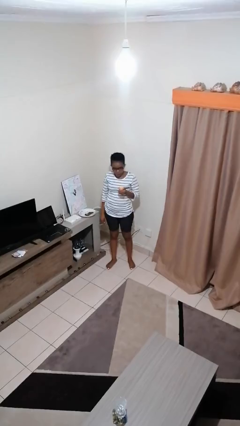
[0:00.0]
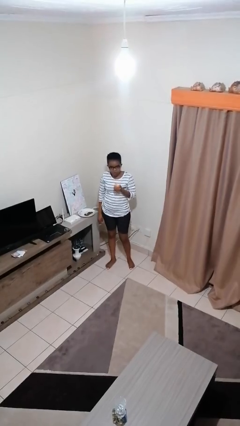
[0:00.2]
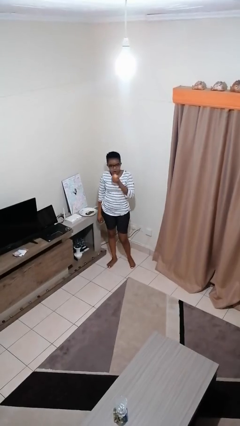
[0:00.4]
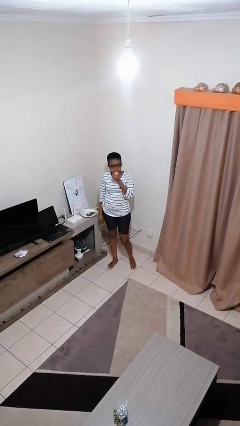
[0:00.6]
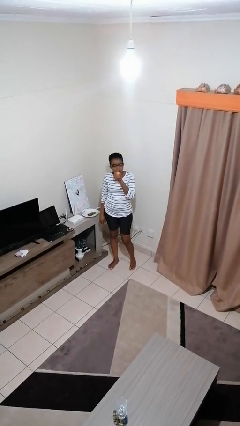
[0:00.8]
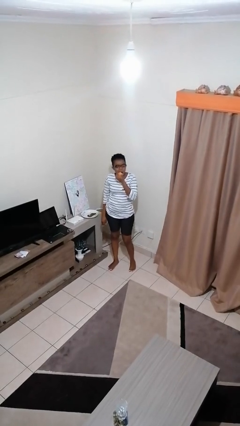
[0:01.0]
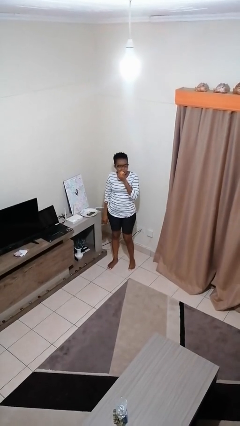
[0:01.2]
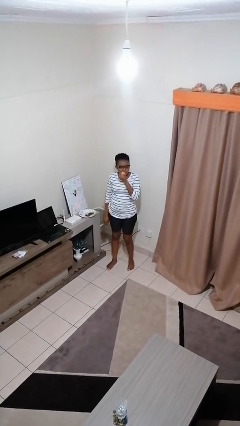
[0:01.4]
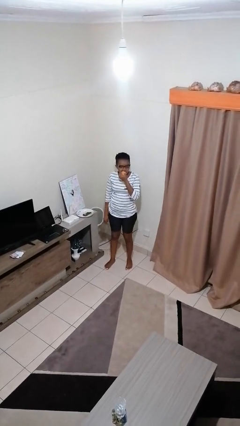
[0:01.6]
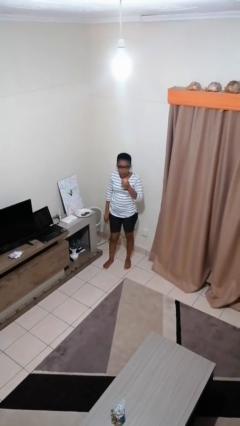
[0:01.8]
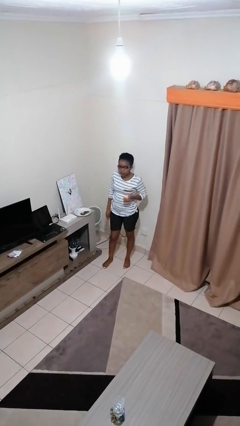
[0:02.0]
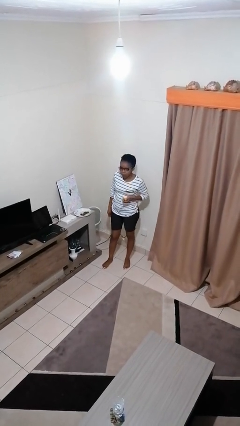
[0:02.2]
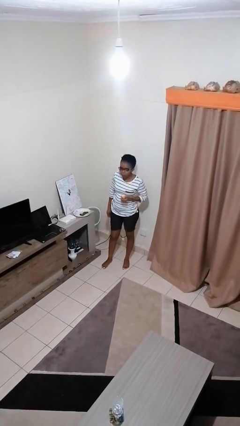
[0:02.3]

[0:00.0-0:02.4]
person eats apple

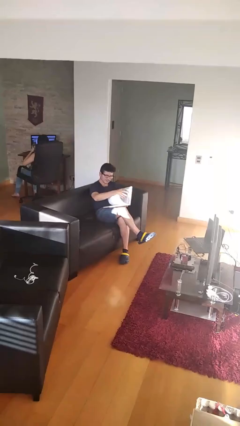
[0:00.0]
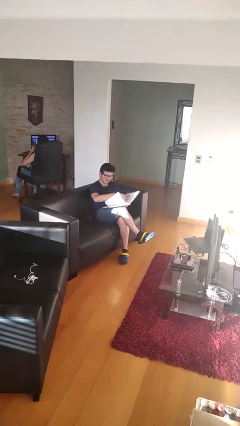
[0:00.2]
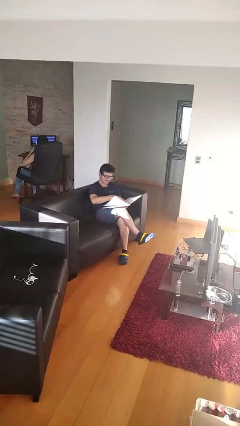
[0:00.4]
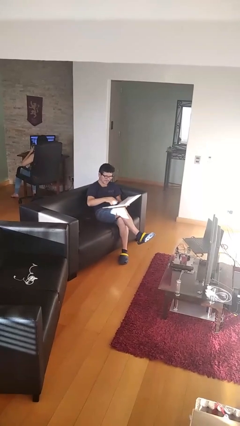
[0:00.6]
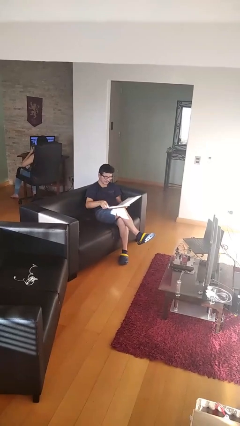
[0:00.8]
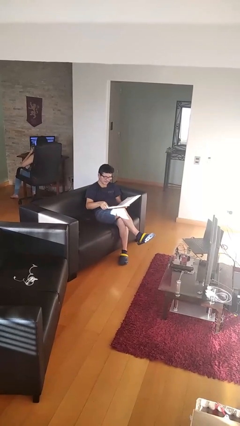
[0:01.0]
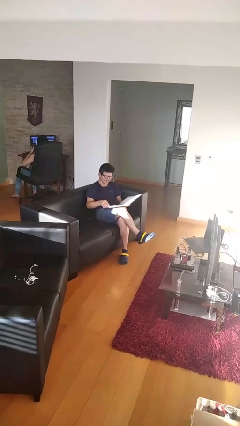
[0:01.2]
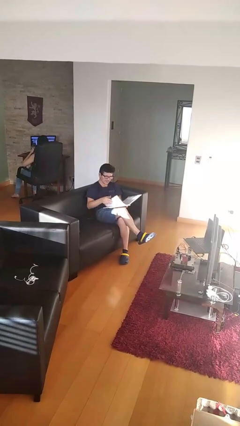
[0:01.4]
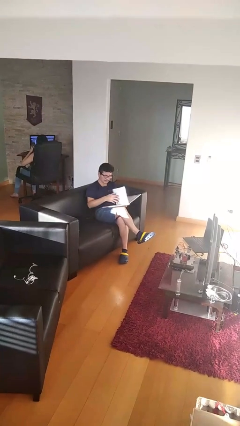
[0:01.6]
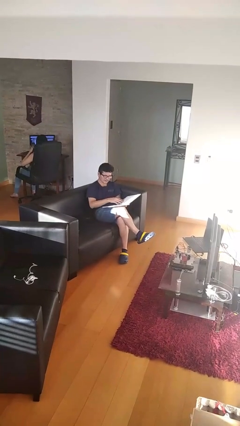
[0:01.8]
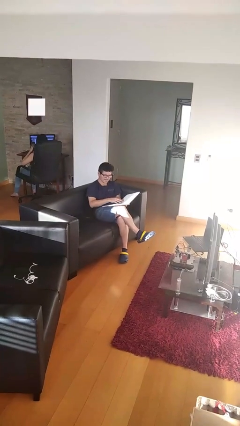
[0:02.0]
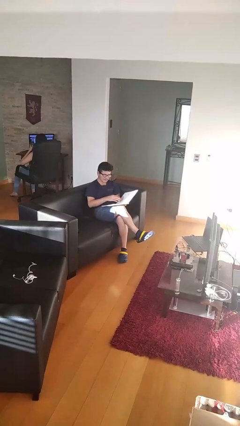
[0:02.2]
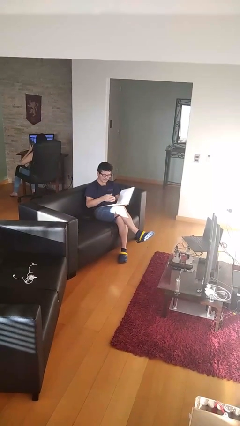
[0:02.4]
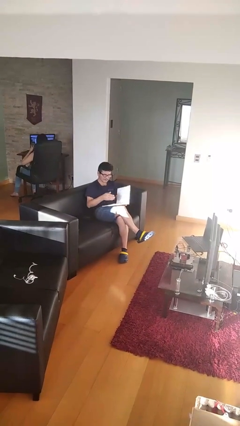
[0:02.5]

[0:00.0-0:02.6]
person reads document

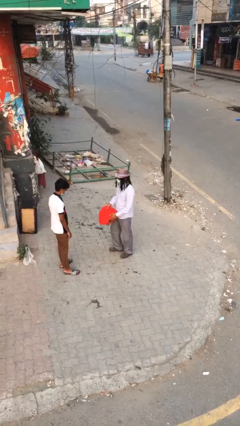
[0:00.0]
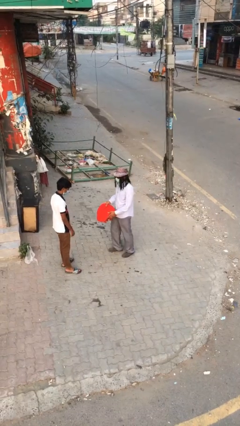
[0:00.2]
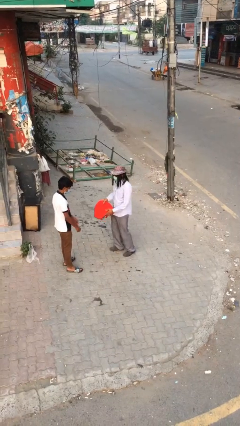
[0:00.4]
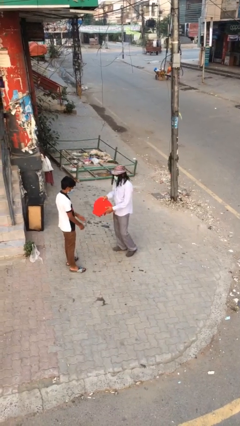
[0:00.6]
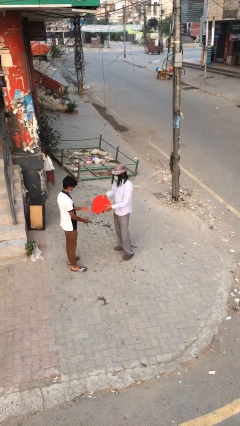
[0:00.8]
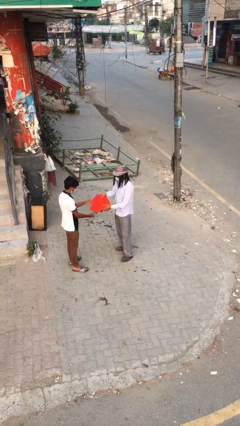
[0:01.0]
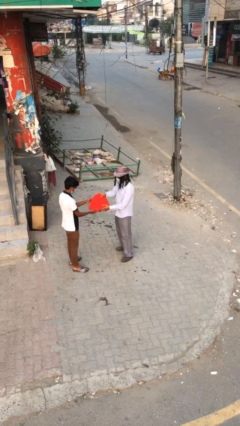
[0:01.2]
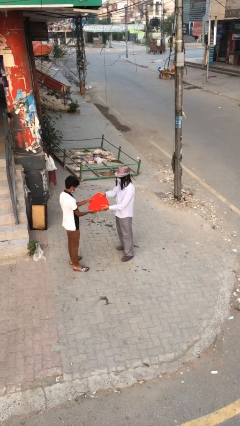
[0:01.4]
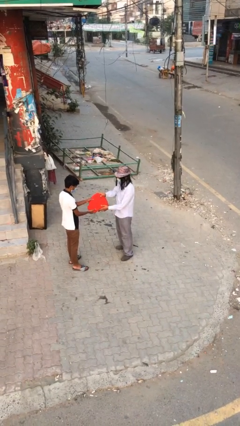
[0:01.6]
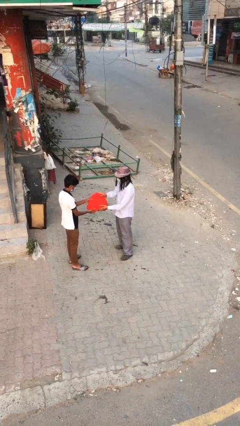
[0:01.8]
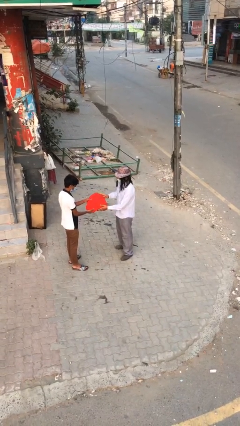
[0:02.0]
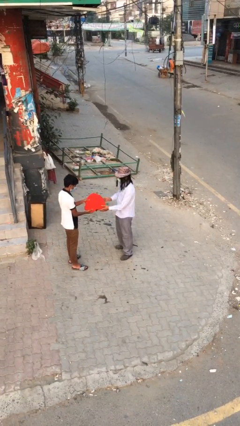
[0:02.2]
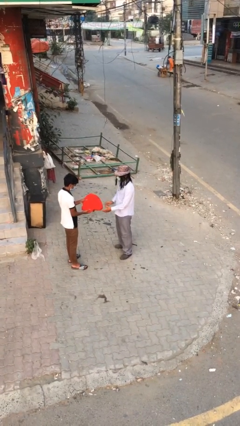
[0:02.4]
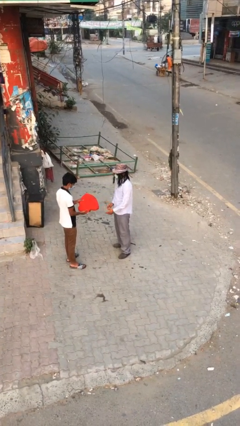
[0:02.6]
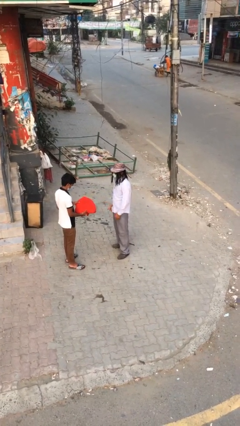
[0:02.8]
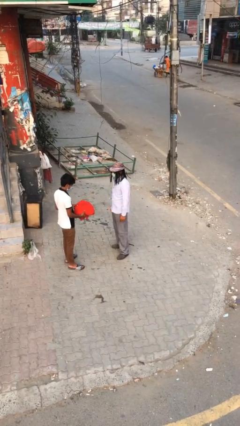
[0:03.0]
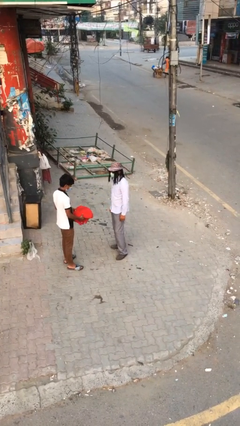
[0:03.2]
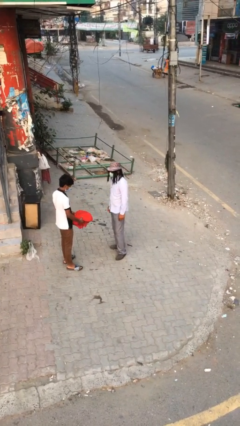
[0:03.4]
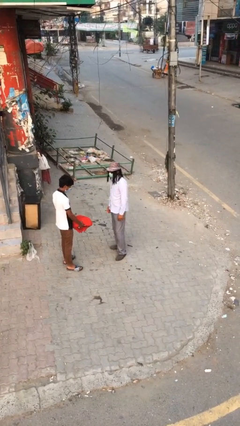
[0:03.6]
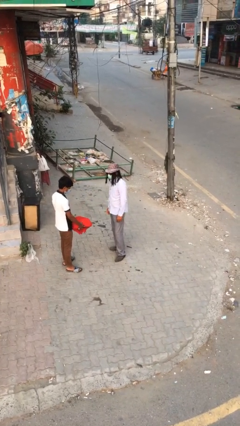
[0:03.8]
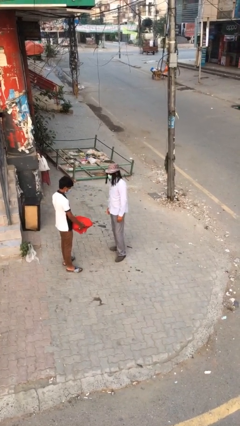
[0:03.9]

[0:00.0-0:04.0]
person transfers object to person

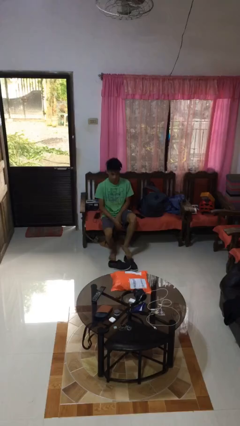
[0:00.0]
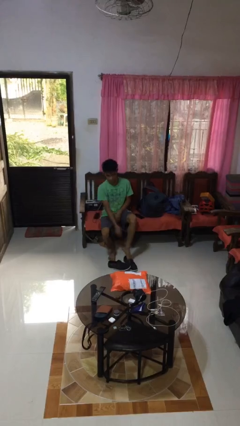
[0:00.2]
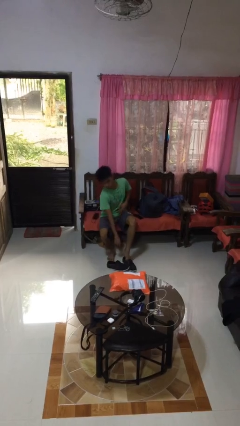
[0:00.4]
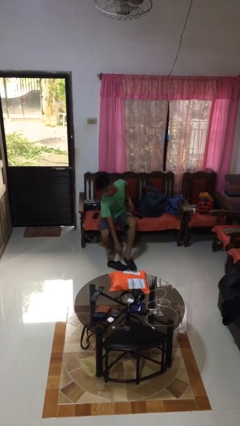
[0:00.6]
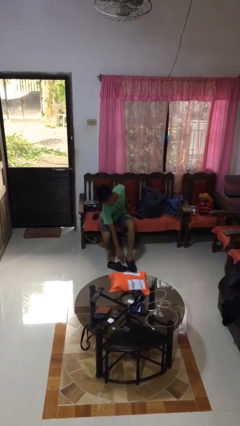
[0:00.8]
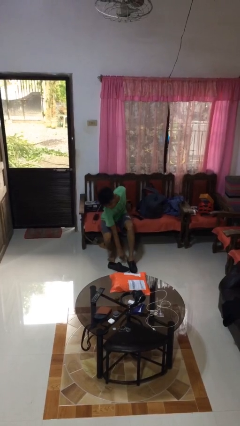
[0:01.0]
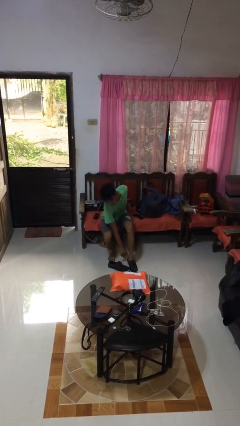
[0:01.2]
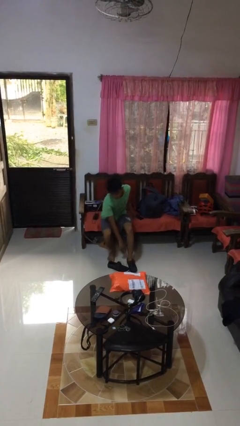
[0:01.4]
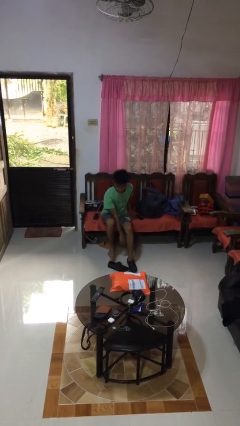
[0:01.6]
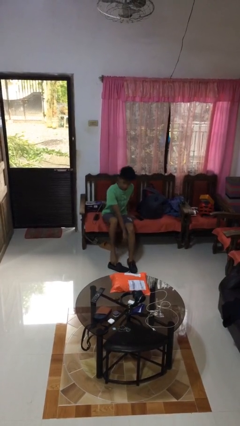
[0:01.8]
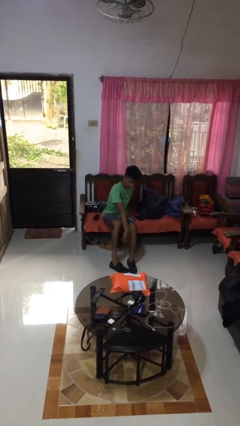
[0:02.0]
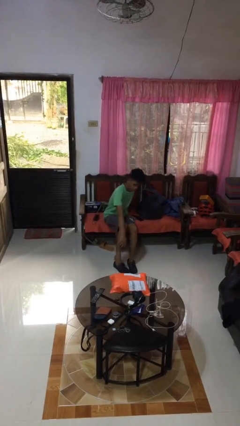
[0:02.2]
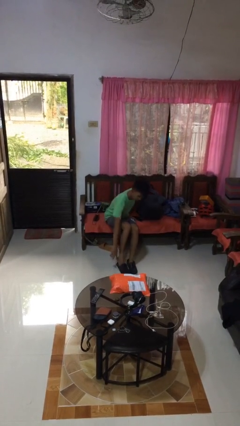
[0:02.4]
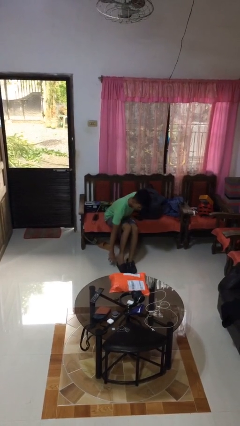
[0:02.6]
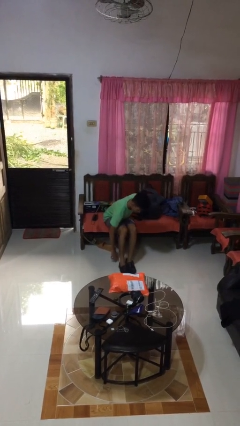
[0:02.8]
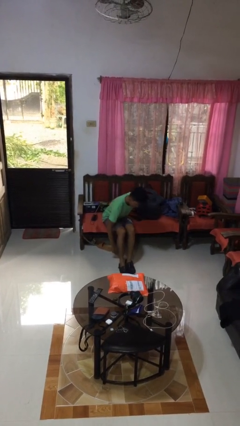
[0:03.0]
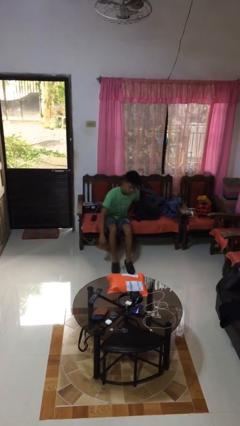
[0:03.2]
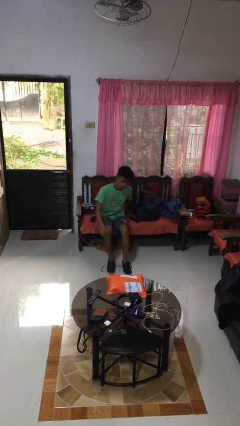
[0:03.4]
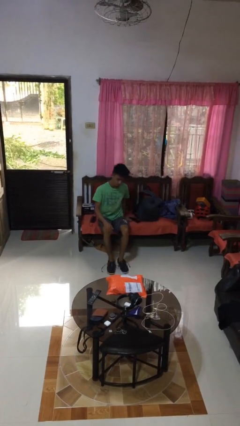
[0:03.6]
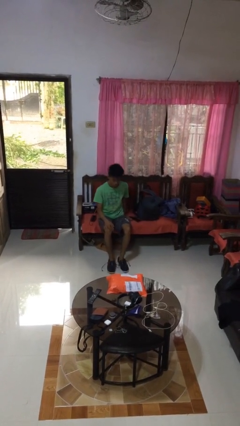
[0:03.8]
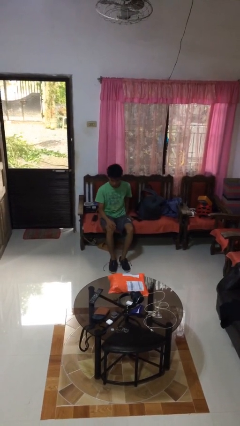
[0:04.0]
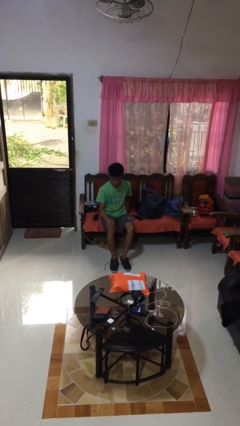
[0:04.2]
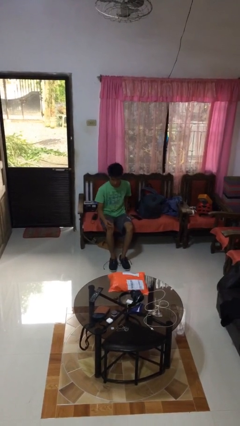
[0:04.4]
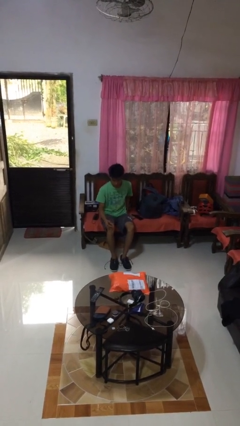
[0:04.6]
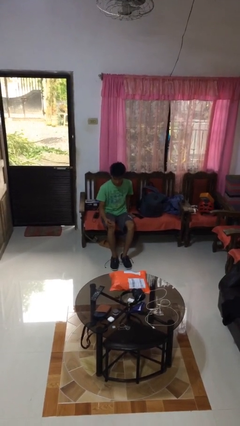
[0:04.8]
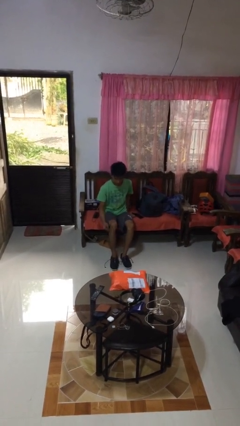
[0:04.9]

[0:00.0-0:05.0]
person puts on shoes

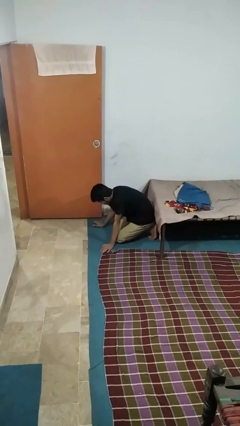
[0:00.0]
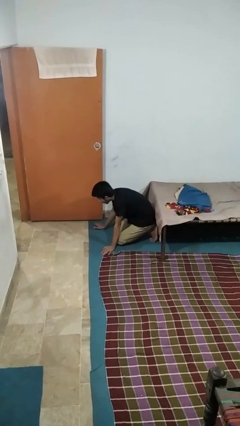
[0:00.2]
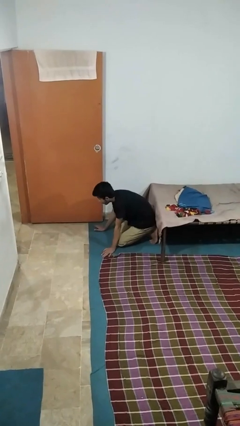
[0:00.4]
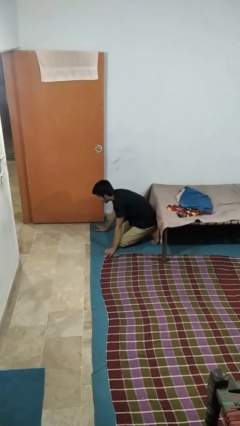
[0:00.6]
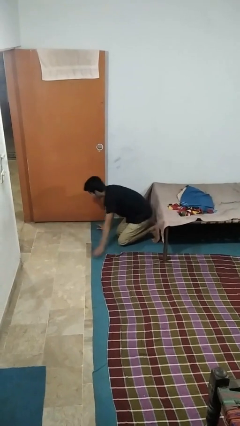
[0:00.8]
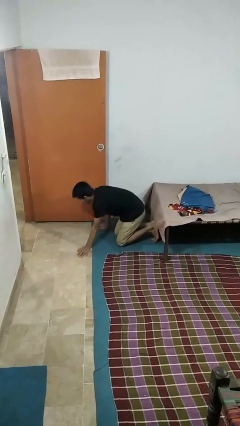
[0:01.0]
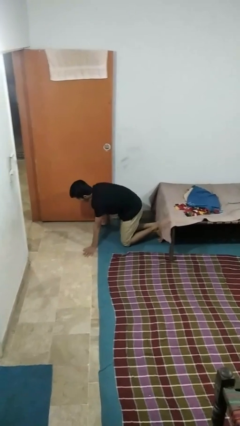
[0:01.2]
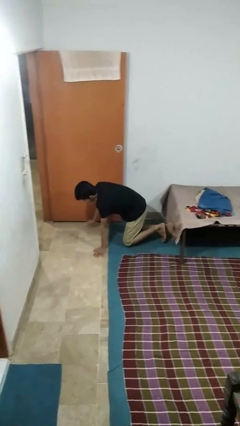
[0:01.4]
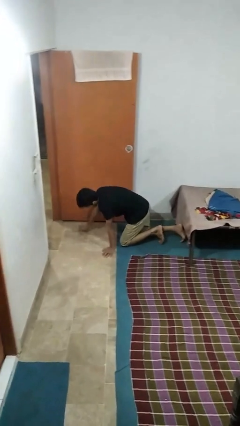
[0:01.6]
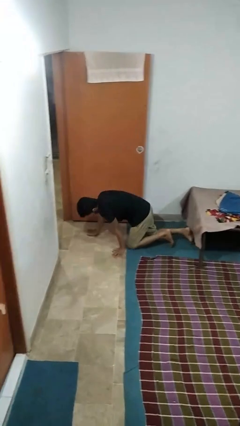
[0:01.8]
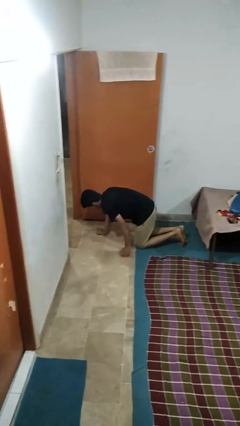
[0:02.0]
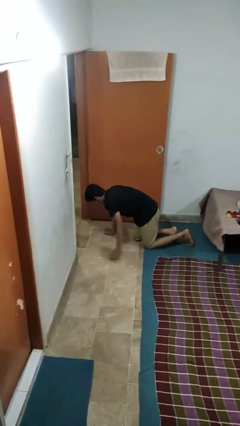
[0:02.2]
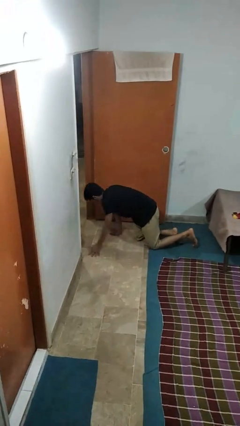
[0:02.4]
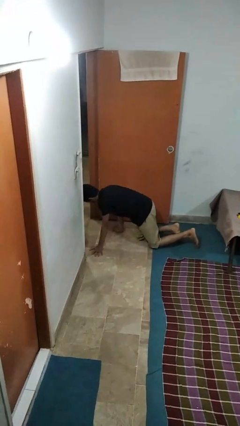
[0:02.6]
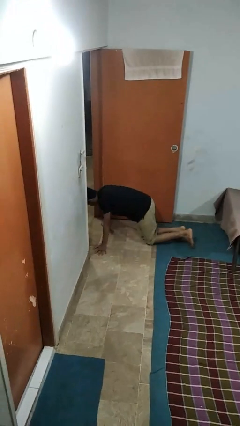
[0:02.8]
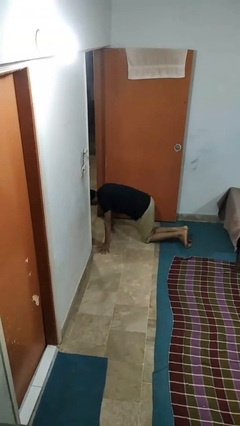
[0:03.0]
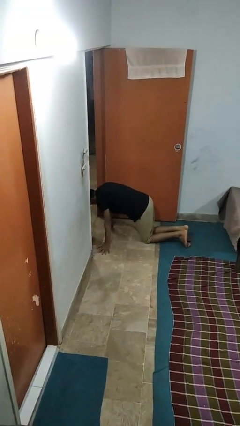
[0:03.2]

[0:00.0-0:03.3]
person crawls

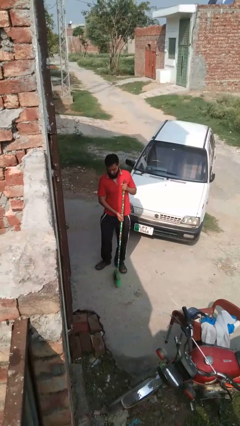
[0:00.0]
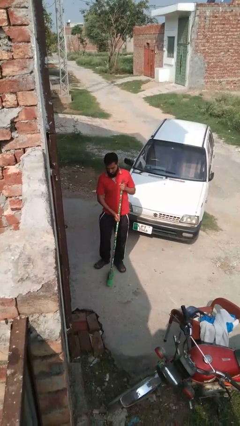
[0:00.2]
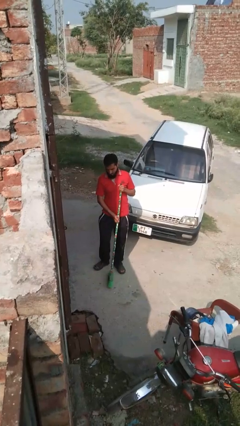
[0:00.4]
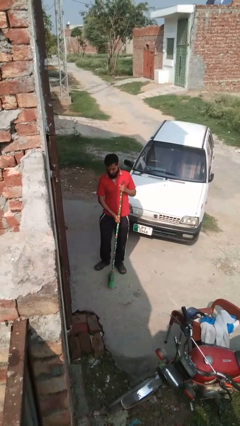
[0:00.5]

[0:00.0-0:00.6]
person sweeps floor
